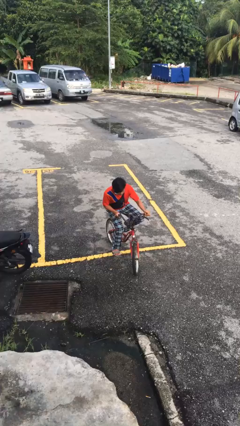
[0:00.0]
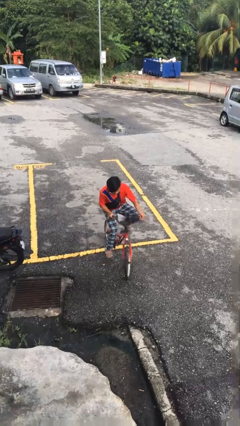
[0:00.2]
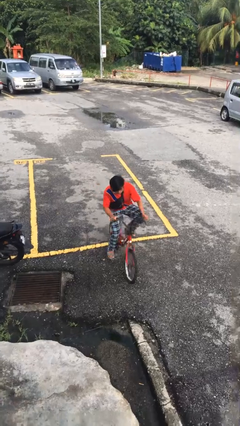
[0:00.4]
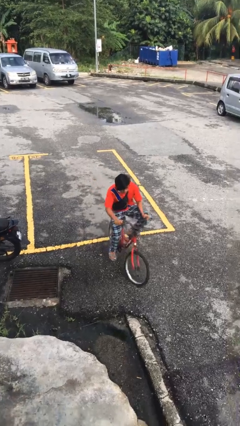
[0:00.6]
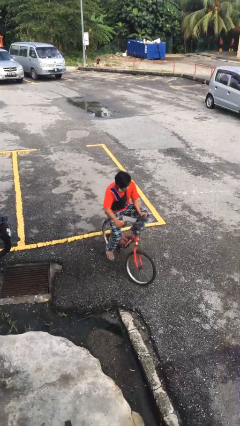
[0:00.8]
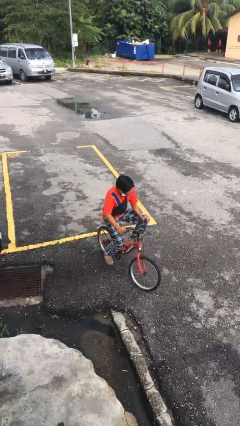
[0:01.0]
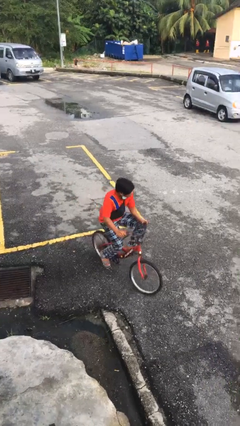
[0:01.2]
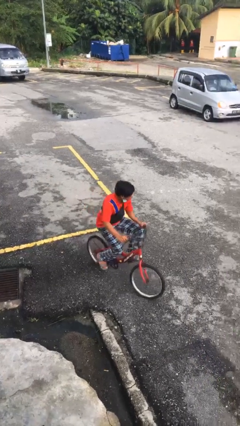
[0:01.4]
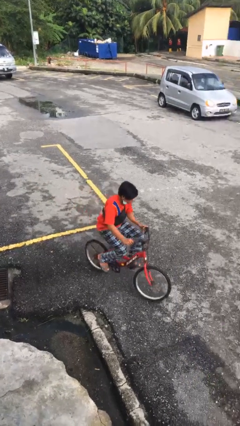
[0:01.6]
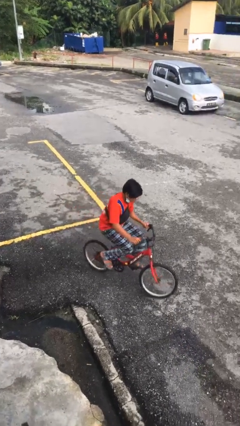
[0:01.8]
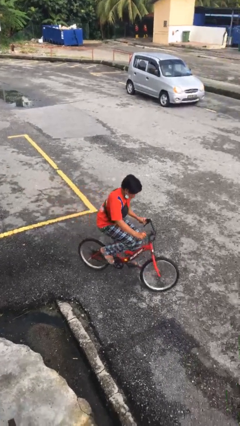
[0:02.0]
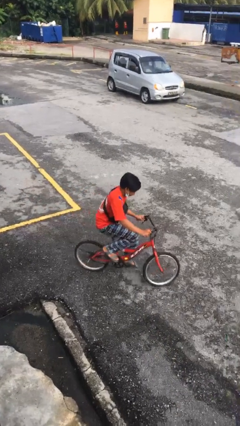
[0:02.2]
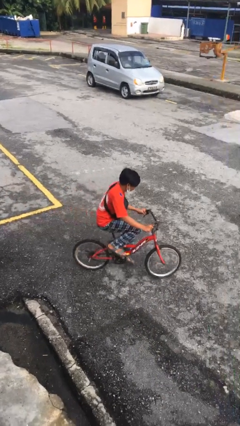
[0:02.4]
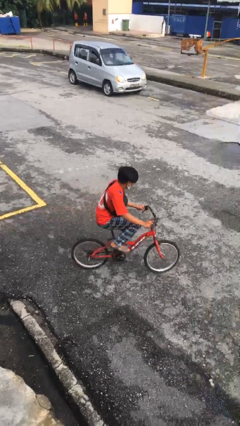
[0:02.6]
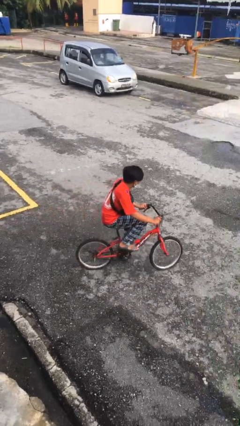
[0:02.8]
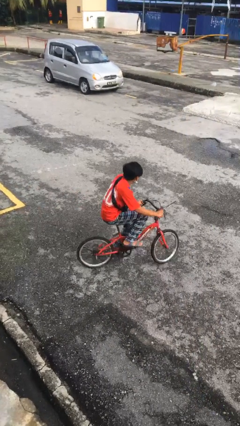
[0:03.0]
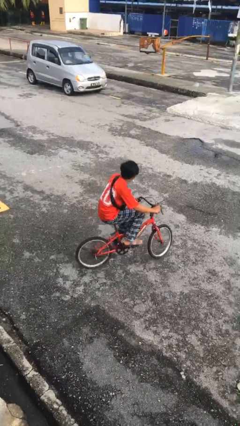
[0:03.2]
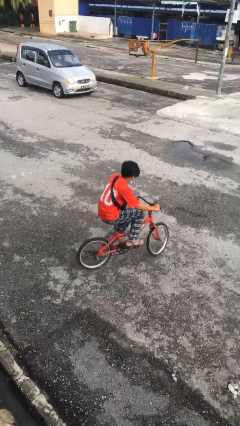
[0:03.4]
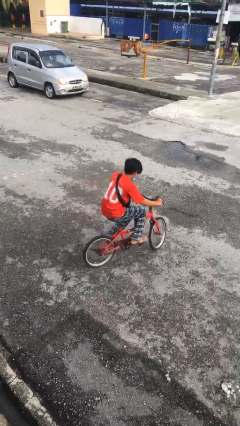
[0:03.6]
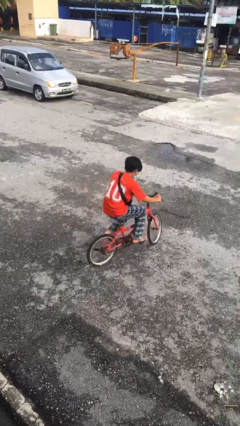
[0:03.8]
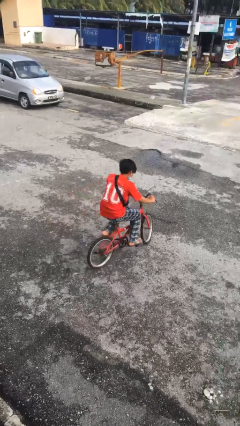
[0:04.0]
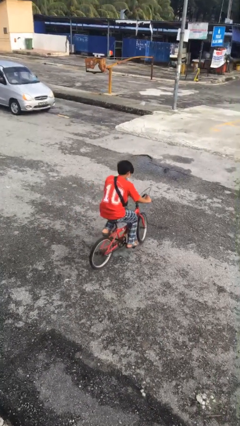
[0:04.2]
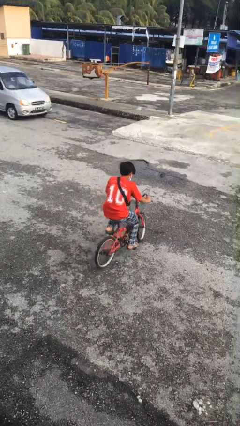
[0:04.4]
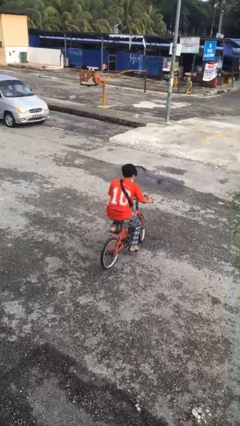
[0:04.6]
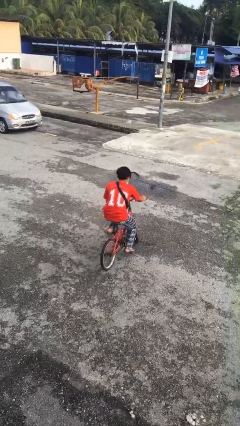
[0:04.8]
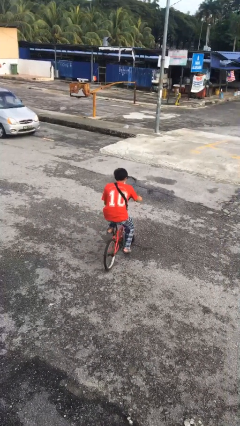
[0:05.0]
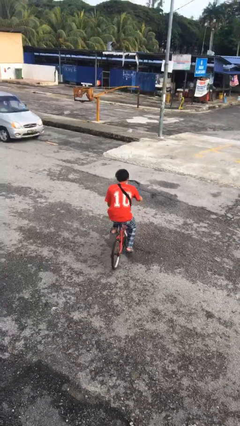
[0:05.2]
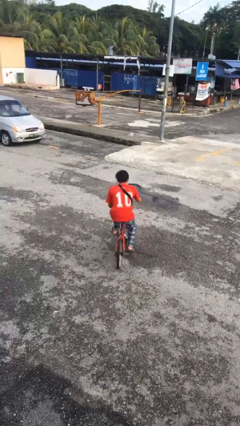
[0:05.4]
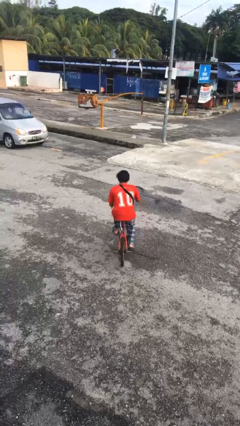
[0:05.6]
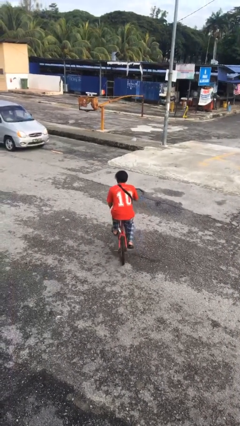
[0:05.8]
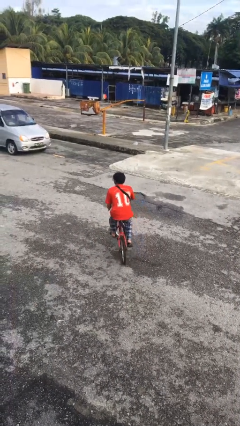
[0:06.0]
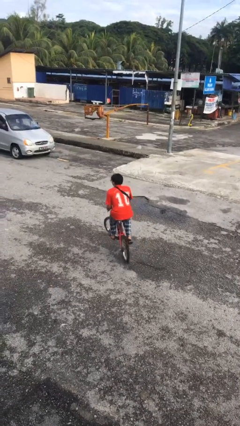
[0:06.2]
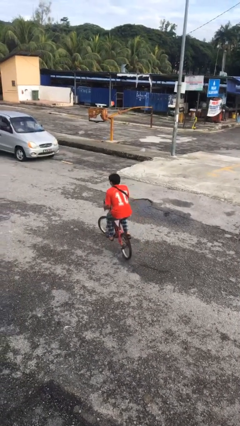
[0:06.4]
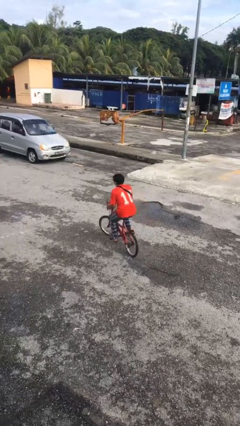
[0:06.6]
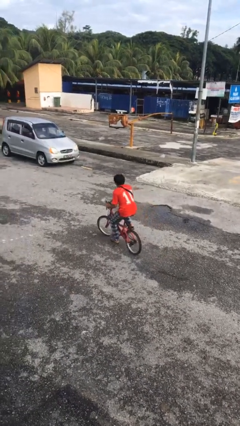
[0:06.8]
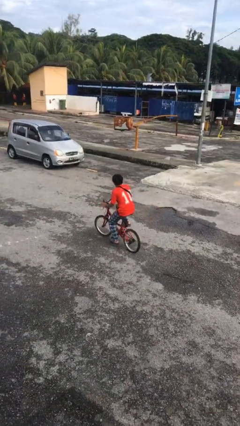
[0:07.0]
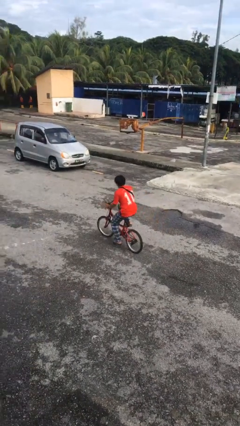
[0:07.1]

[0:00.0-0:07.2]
person rides bicycle

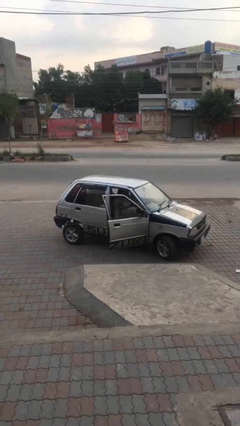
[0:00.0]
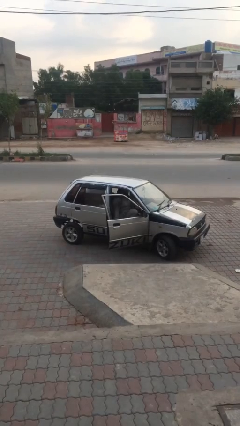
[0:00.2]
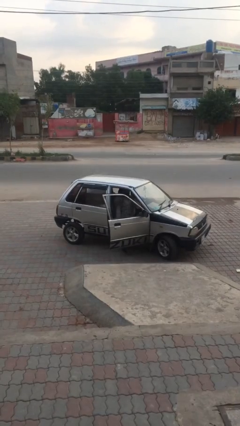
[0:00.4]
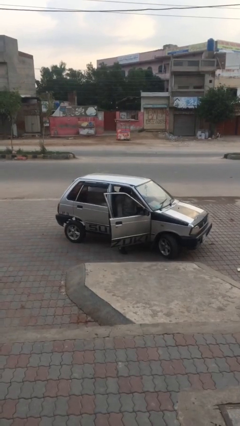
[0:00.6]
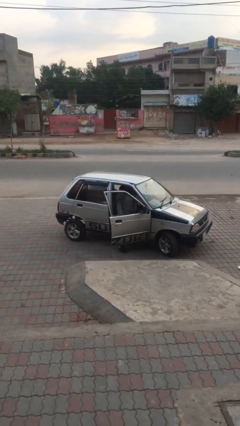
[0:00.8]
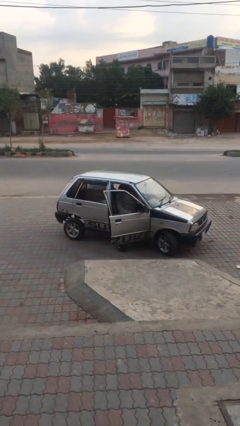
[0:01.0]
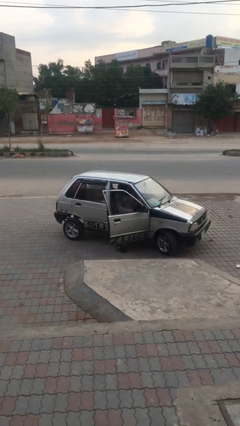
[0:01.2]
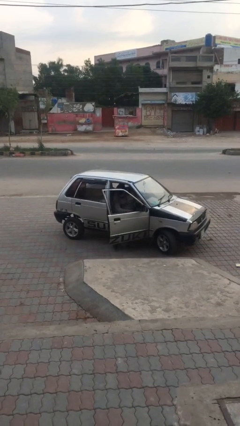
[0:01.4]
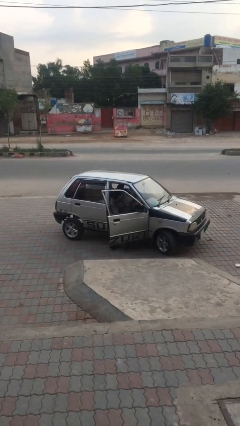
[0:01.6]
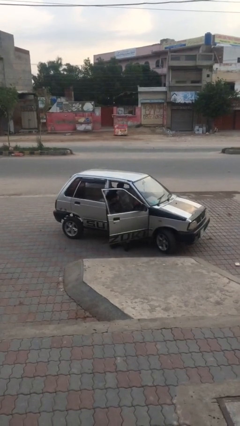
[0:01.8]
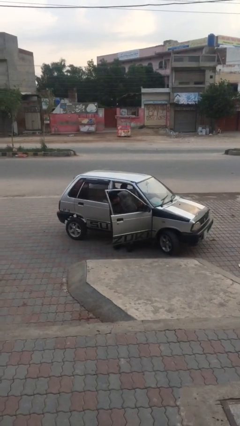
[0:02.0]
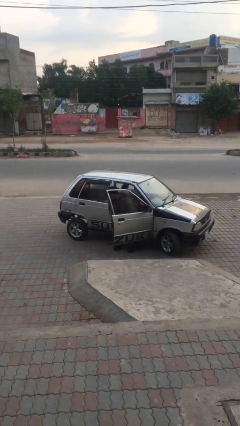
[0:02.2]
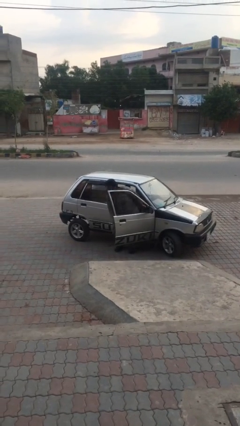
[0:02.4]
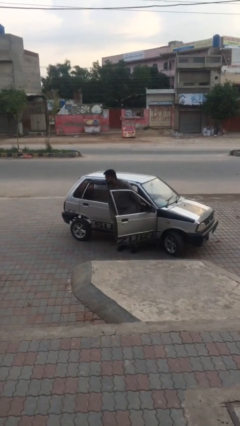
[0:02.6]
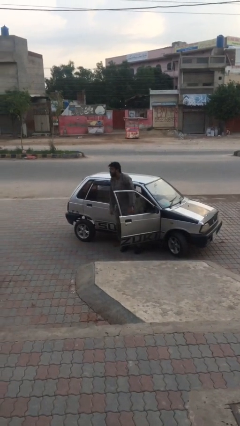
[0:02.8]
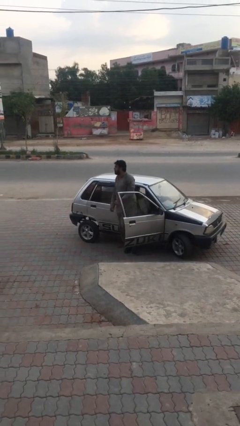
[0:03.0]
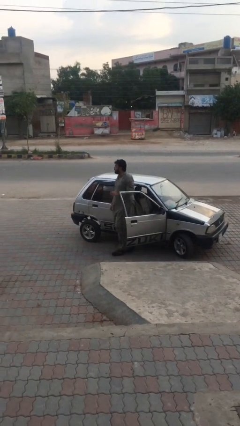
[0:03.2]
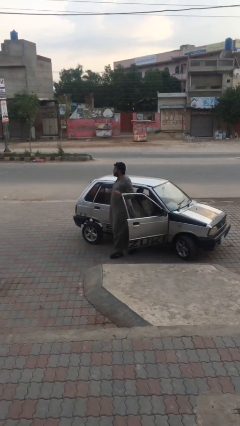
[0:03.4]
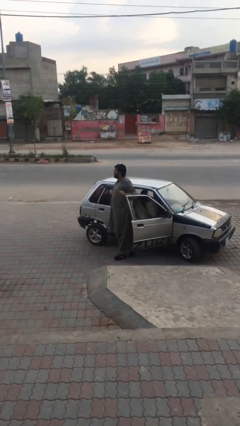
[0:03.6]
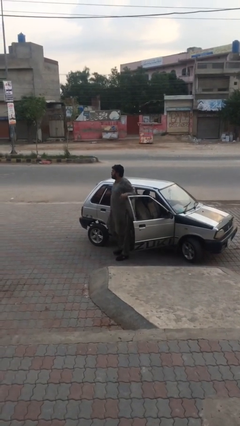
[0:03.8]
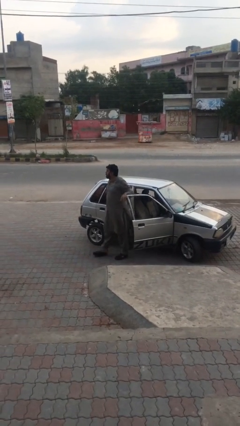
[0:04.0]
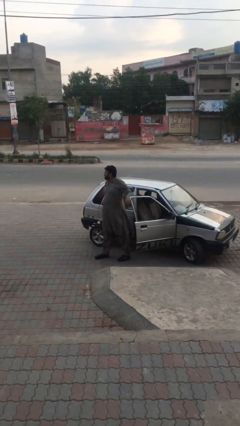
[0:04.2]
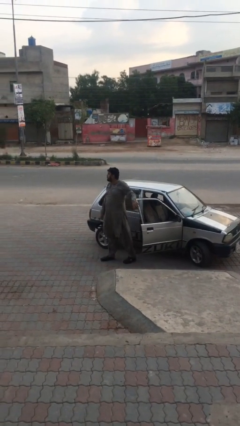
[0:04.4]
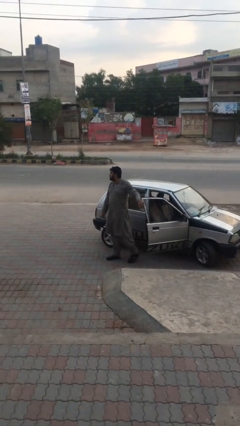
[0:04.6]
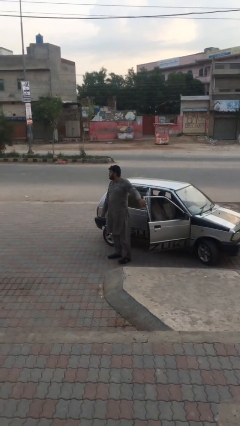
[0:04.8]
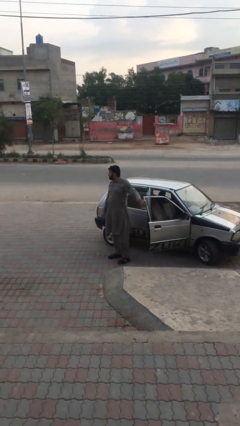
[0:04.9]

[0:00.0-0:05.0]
person exits car

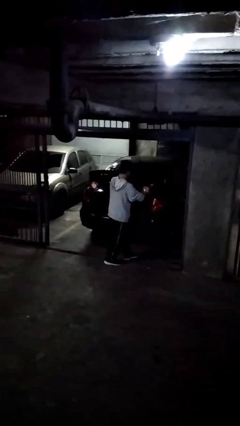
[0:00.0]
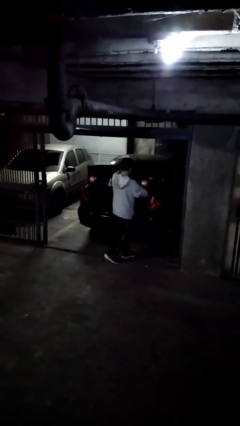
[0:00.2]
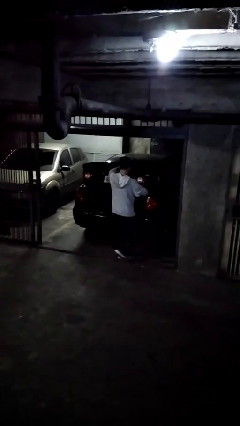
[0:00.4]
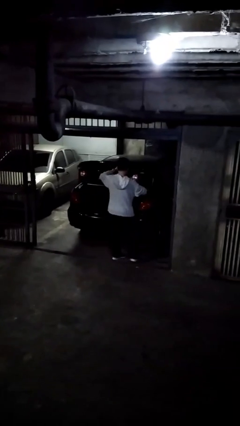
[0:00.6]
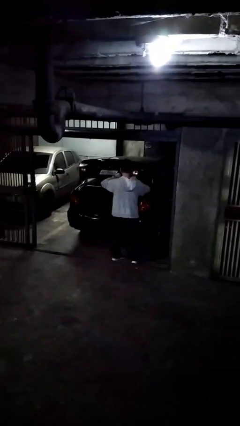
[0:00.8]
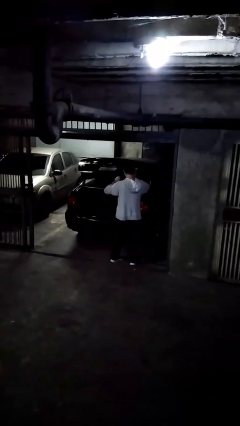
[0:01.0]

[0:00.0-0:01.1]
person opens car trunk

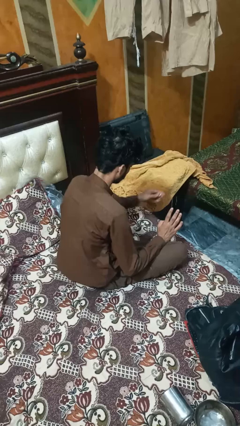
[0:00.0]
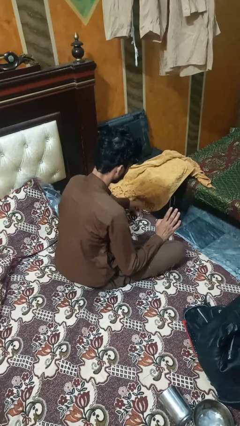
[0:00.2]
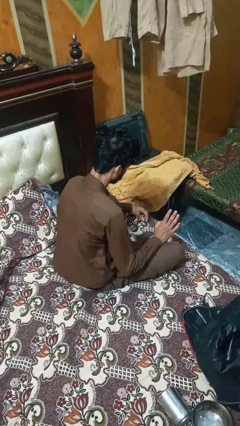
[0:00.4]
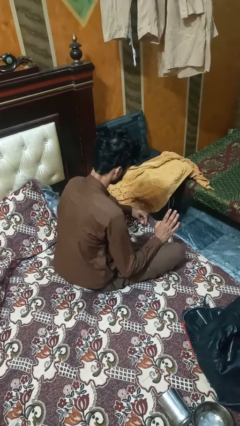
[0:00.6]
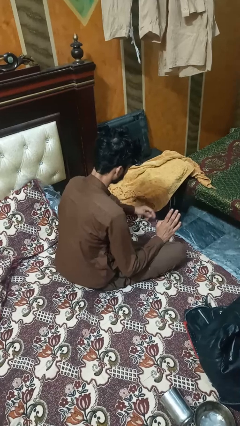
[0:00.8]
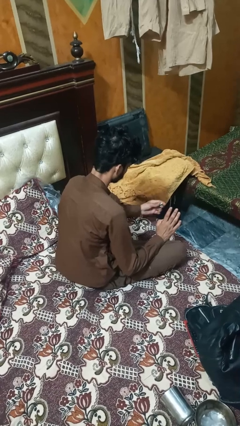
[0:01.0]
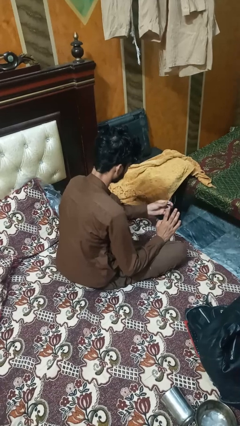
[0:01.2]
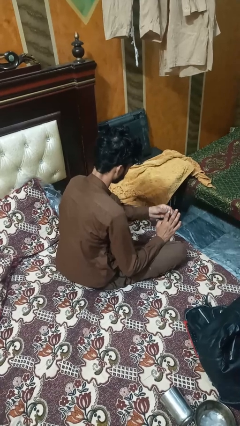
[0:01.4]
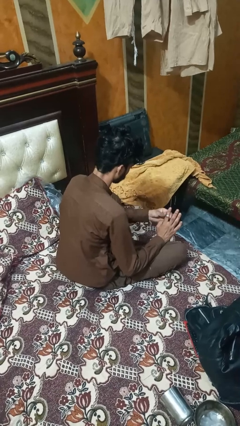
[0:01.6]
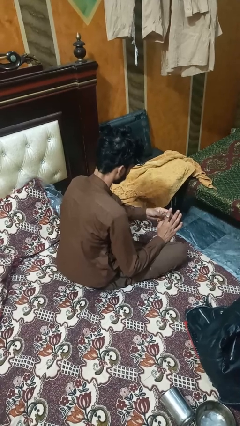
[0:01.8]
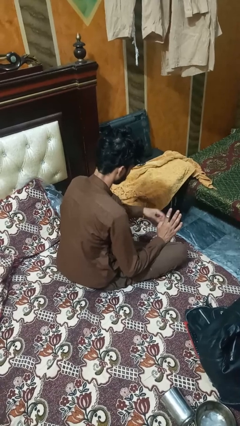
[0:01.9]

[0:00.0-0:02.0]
person puts on ring

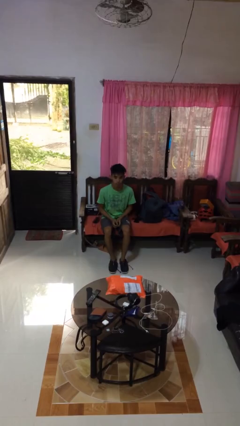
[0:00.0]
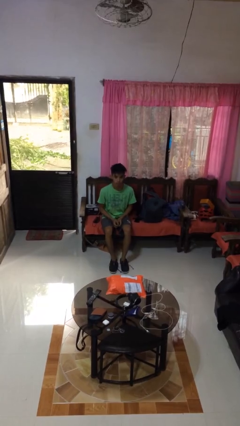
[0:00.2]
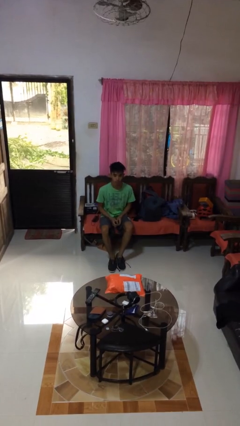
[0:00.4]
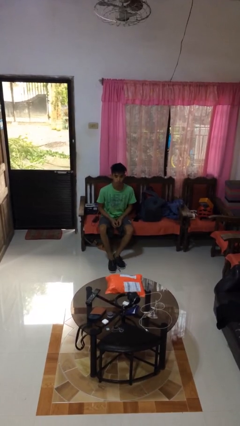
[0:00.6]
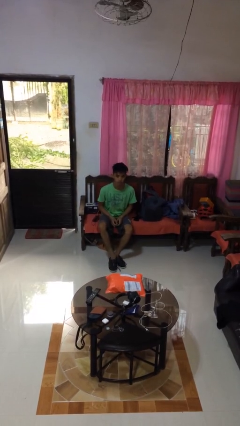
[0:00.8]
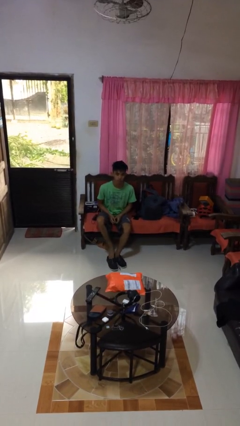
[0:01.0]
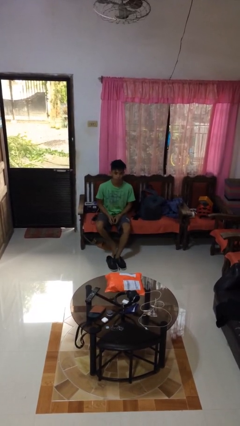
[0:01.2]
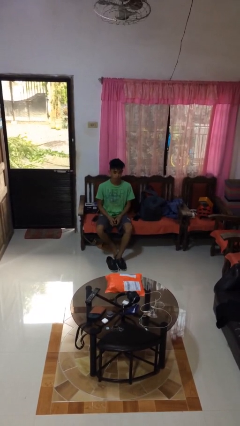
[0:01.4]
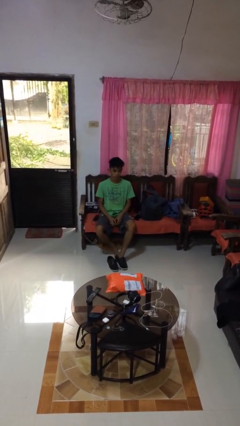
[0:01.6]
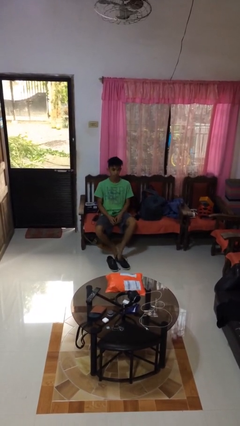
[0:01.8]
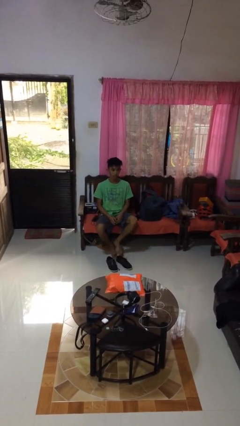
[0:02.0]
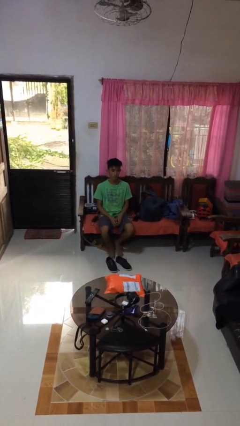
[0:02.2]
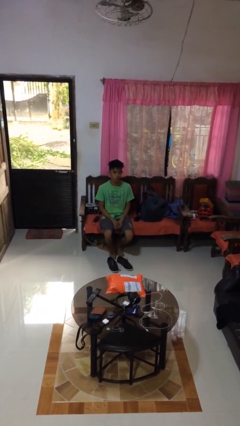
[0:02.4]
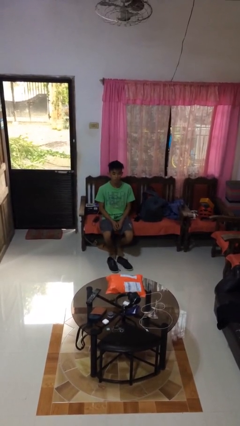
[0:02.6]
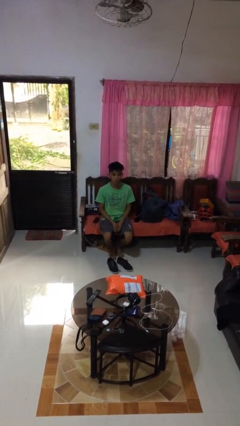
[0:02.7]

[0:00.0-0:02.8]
person takes off shoes
